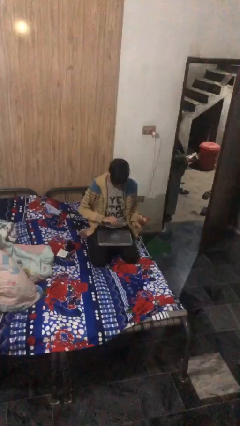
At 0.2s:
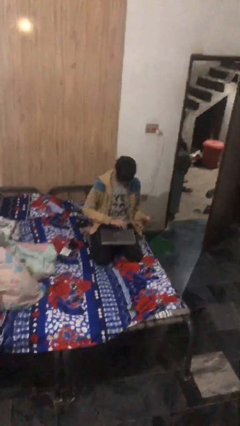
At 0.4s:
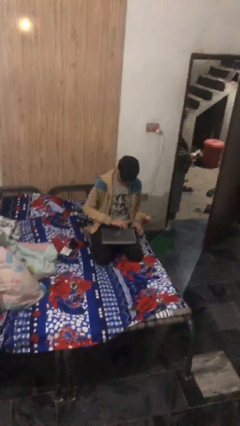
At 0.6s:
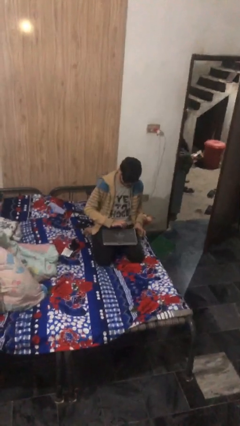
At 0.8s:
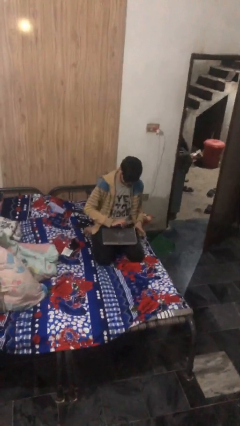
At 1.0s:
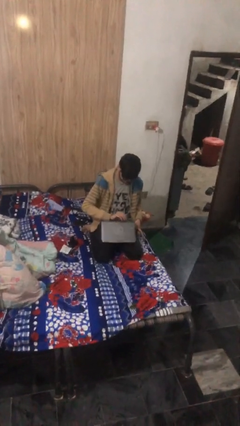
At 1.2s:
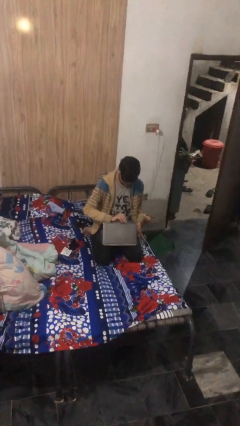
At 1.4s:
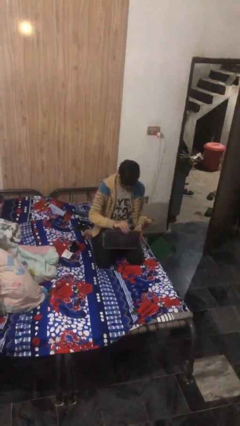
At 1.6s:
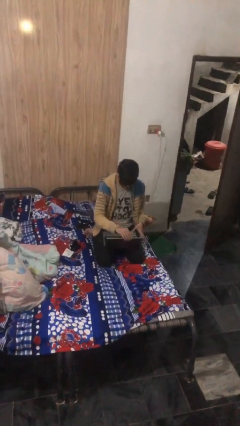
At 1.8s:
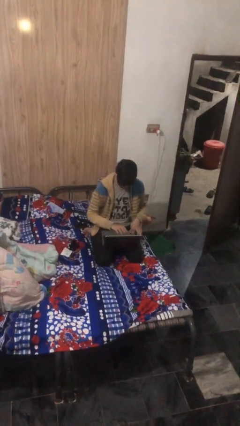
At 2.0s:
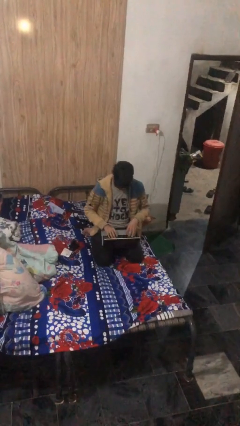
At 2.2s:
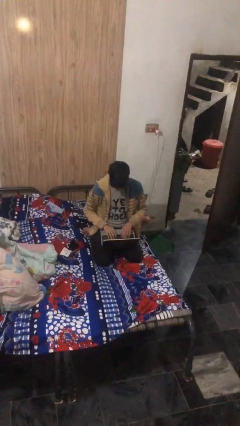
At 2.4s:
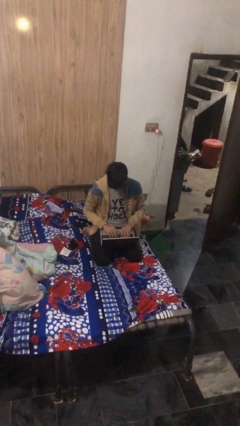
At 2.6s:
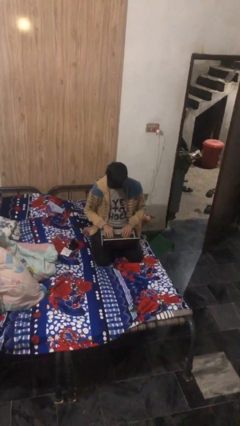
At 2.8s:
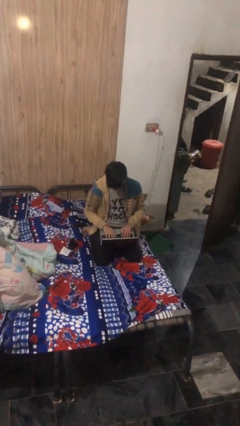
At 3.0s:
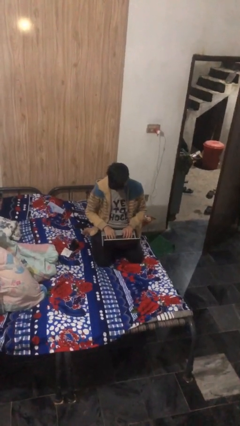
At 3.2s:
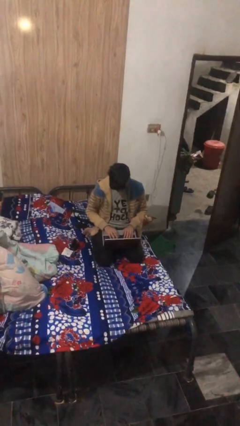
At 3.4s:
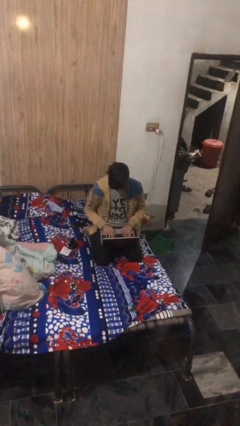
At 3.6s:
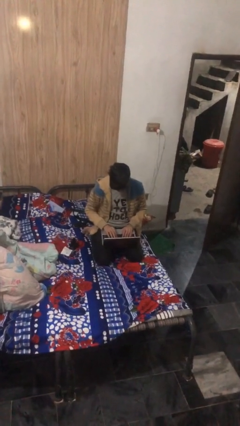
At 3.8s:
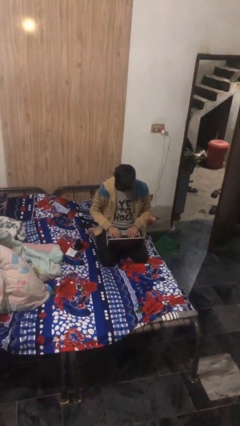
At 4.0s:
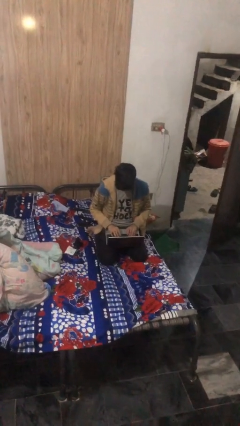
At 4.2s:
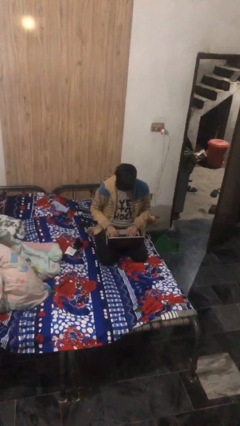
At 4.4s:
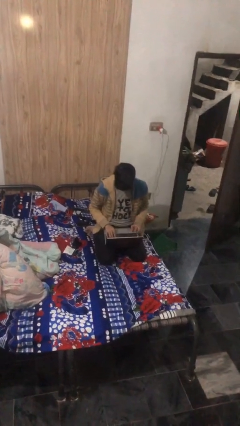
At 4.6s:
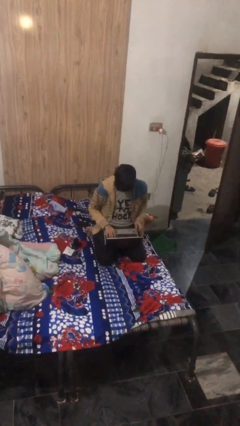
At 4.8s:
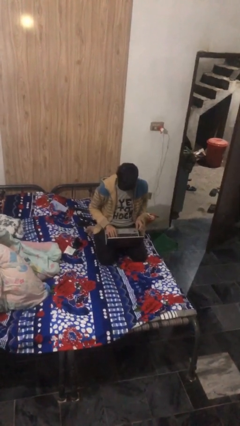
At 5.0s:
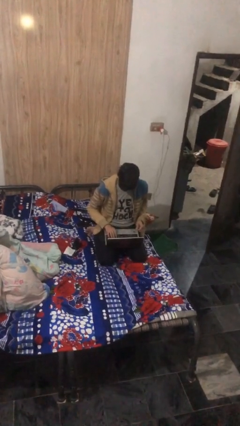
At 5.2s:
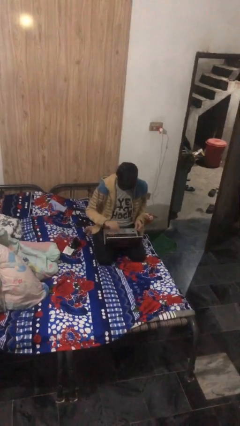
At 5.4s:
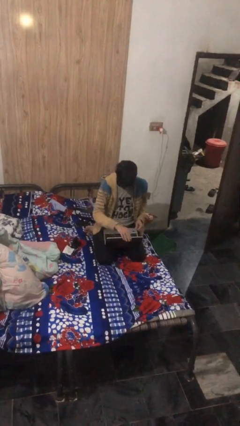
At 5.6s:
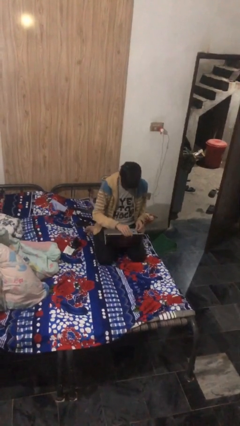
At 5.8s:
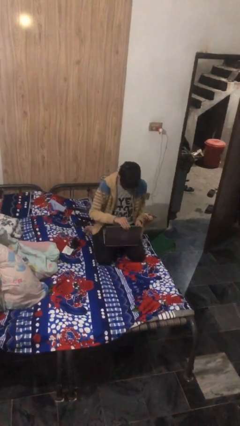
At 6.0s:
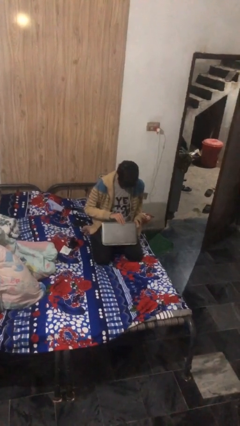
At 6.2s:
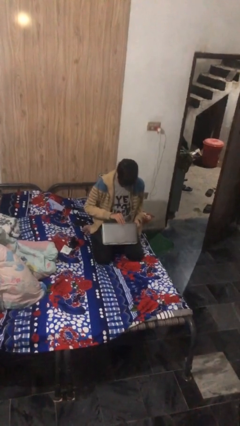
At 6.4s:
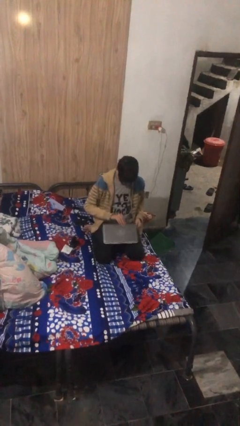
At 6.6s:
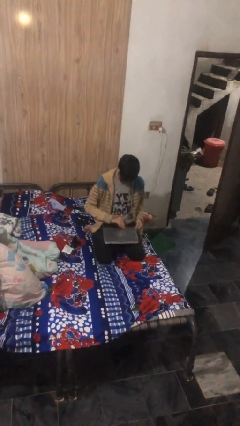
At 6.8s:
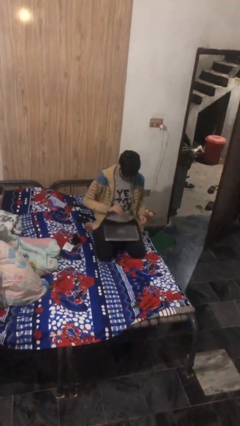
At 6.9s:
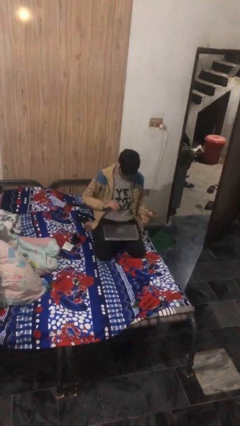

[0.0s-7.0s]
person interacts with laptop

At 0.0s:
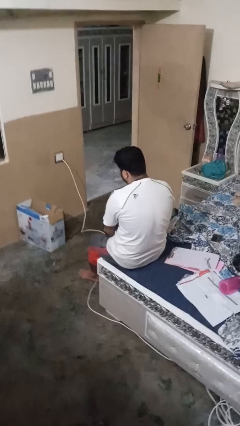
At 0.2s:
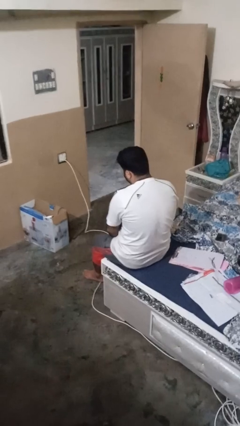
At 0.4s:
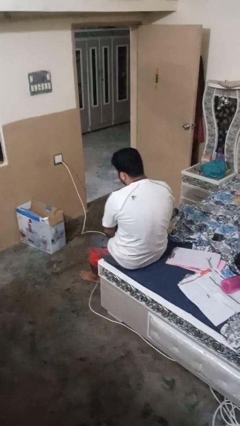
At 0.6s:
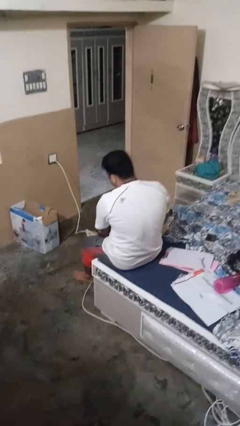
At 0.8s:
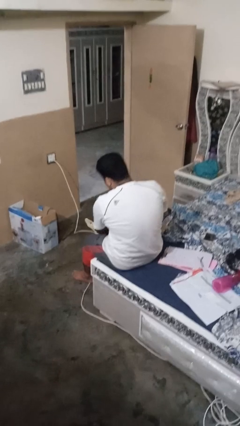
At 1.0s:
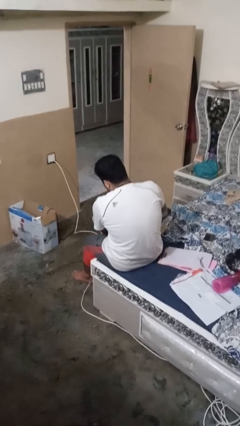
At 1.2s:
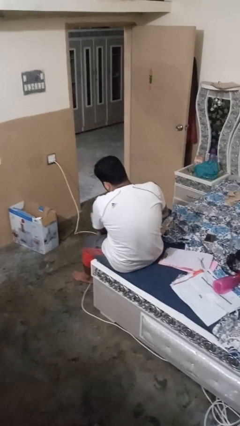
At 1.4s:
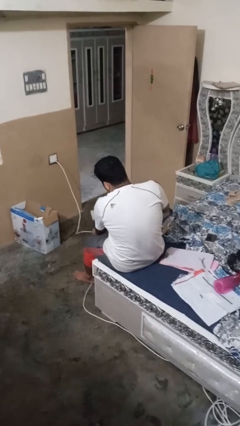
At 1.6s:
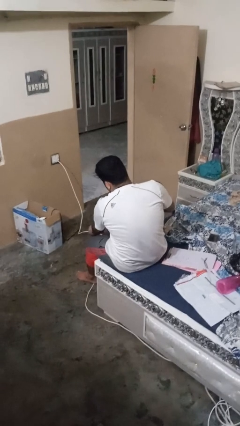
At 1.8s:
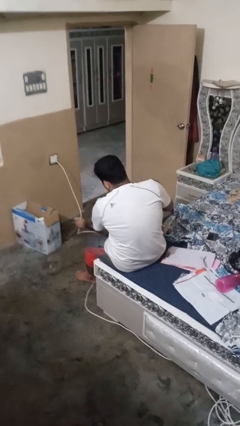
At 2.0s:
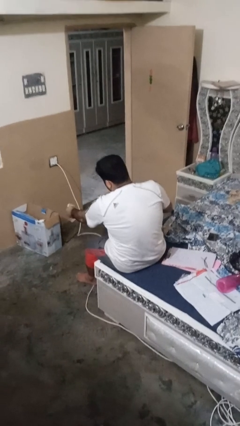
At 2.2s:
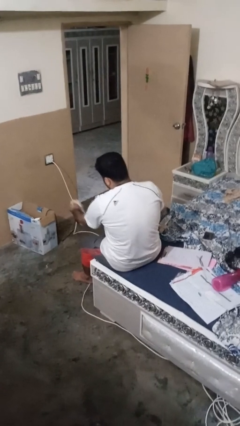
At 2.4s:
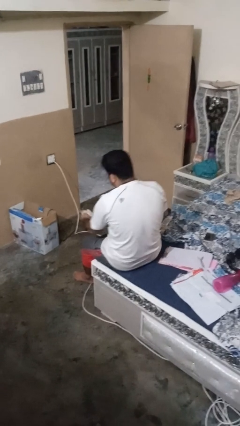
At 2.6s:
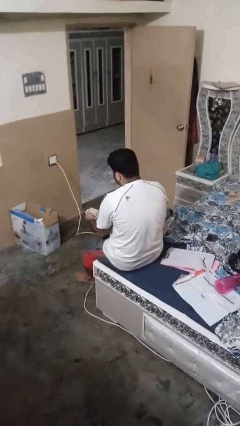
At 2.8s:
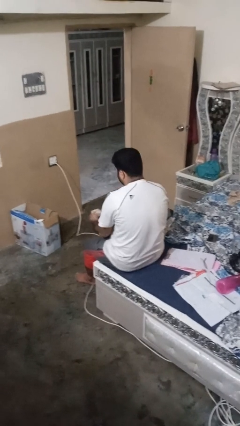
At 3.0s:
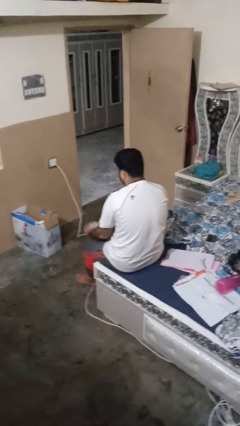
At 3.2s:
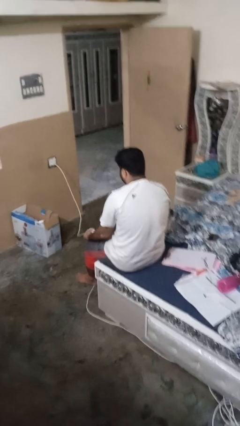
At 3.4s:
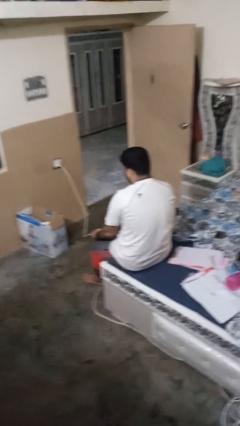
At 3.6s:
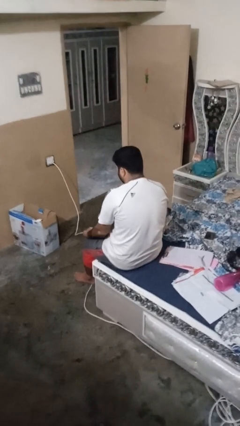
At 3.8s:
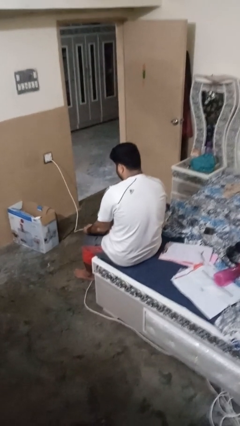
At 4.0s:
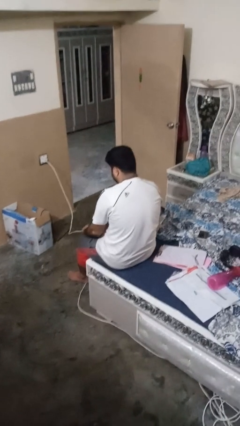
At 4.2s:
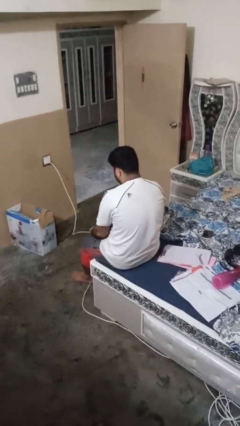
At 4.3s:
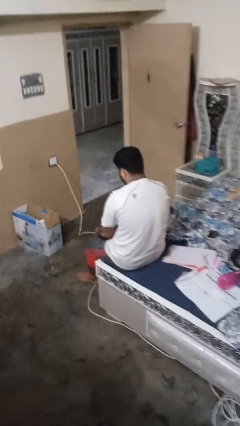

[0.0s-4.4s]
person takes off socks

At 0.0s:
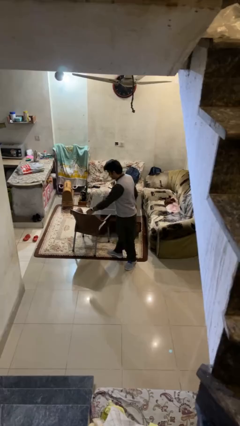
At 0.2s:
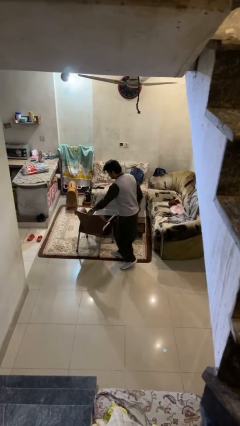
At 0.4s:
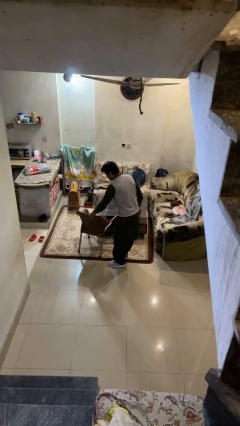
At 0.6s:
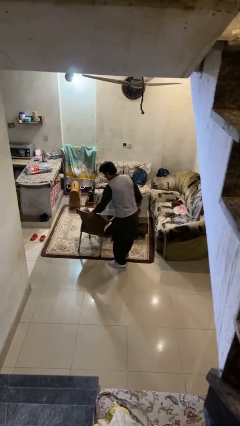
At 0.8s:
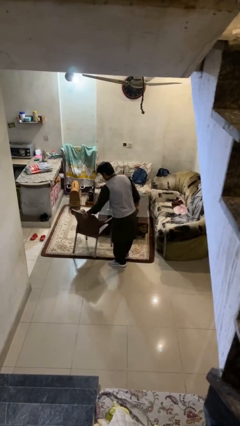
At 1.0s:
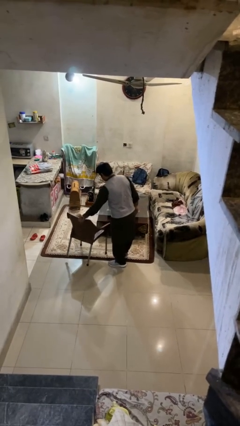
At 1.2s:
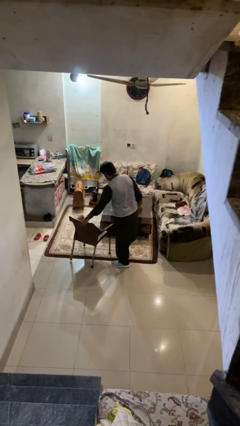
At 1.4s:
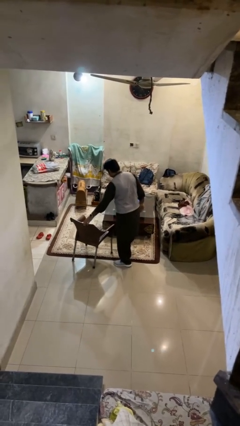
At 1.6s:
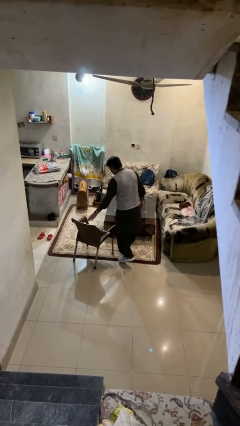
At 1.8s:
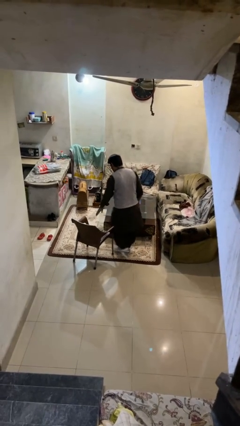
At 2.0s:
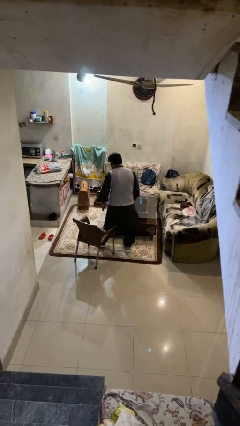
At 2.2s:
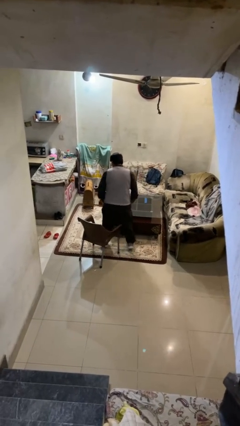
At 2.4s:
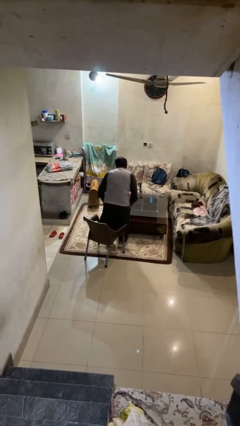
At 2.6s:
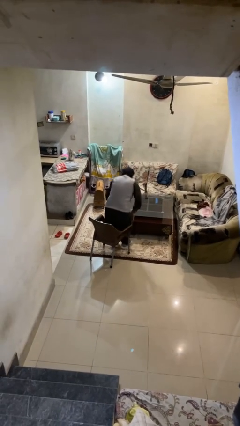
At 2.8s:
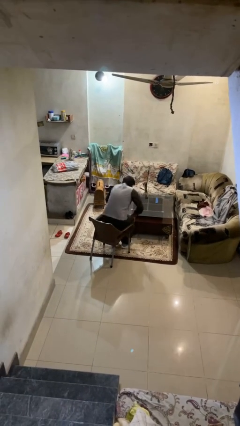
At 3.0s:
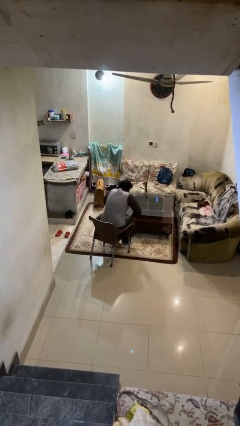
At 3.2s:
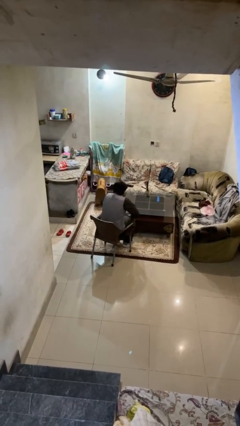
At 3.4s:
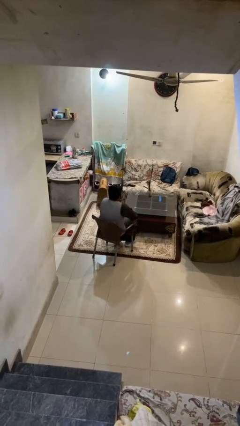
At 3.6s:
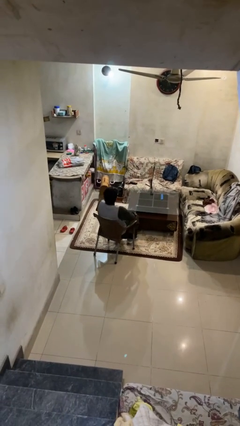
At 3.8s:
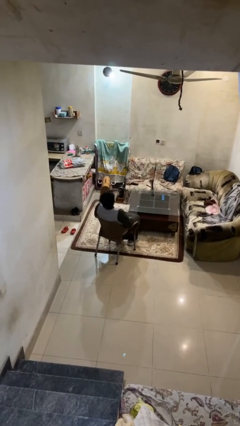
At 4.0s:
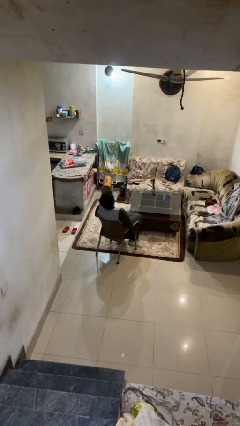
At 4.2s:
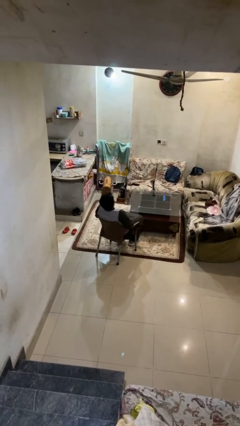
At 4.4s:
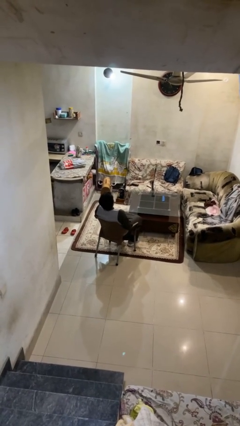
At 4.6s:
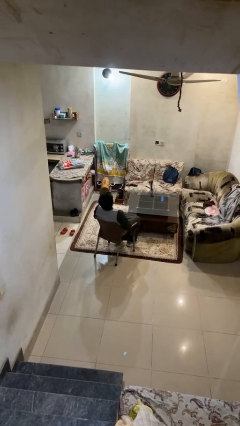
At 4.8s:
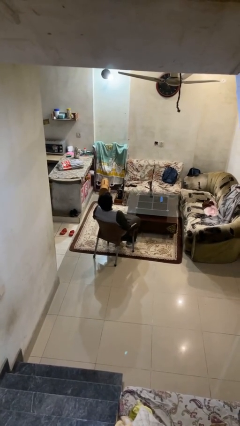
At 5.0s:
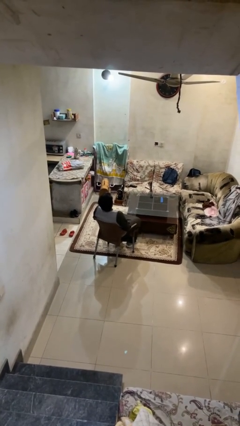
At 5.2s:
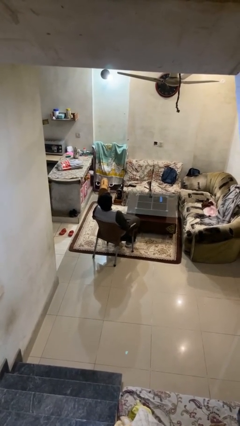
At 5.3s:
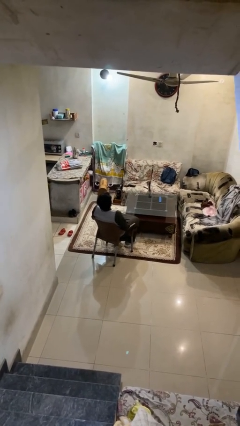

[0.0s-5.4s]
person sits down

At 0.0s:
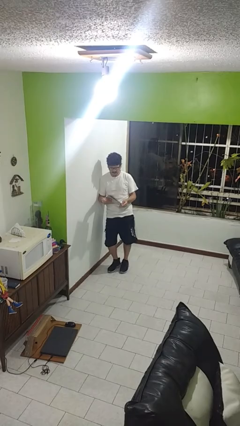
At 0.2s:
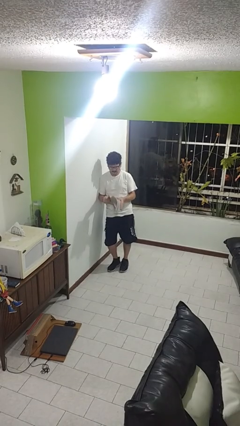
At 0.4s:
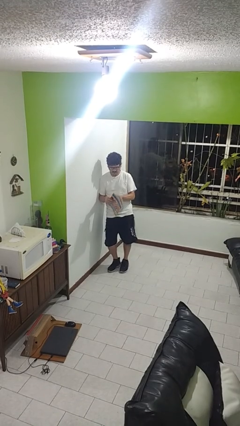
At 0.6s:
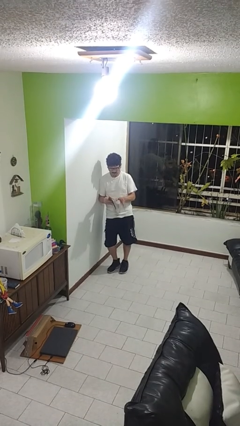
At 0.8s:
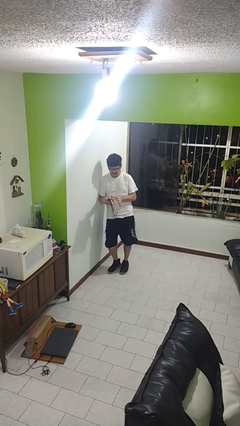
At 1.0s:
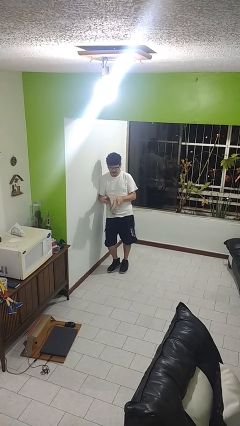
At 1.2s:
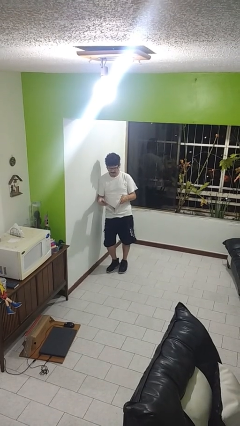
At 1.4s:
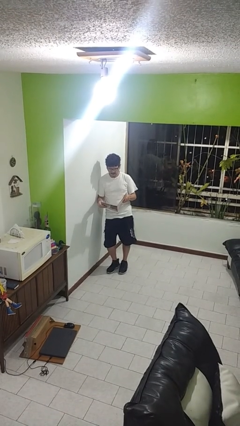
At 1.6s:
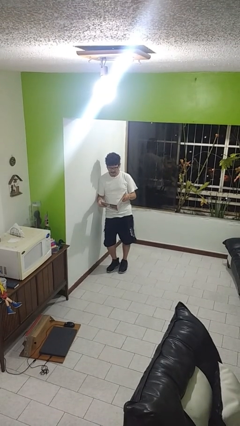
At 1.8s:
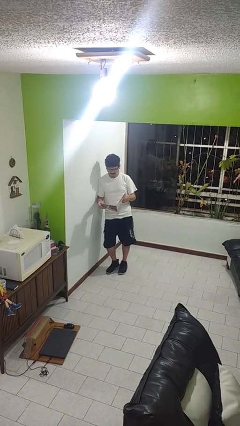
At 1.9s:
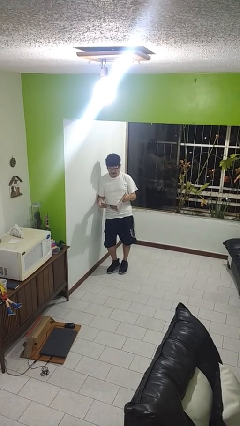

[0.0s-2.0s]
person reads magazine
